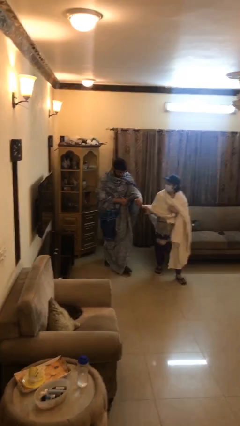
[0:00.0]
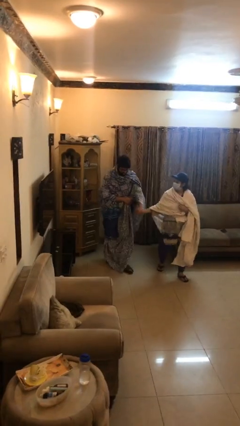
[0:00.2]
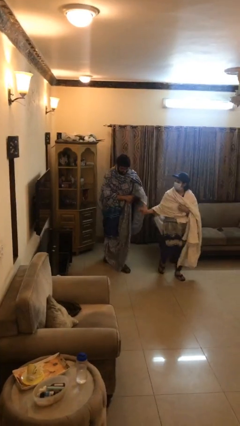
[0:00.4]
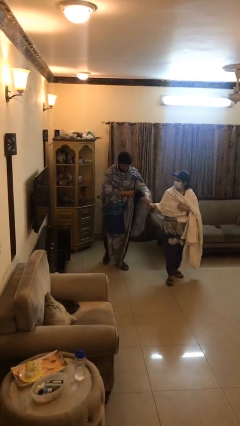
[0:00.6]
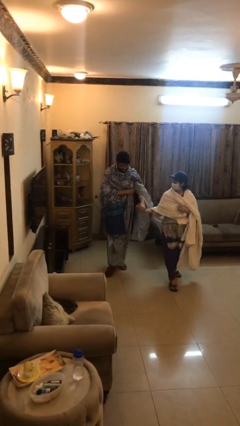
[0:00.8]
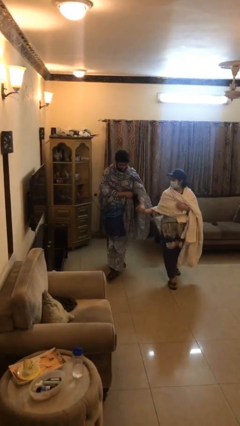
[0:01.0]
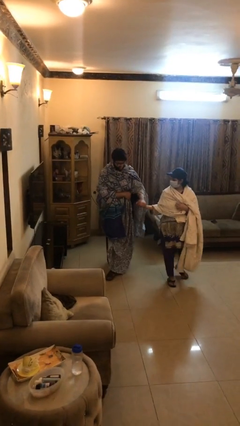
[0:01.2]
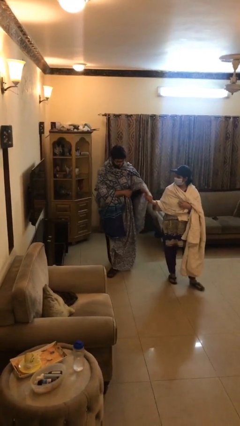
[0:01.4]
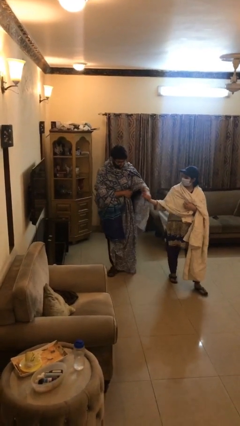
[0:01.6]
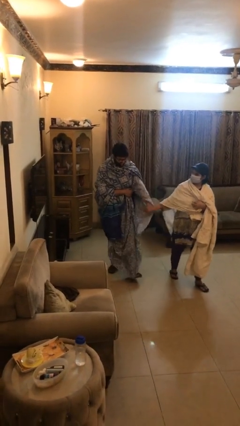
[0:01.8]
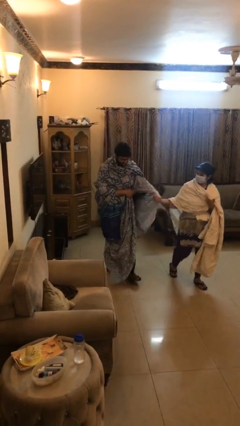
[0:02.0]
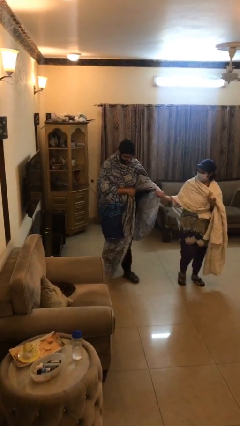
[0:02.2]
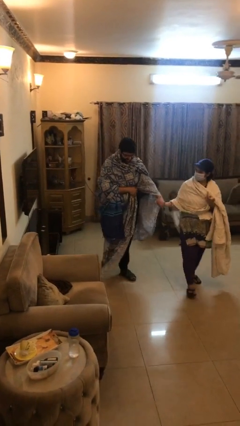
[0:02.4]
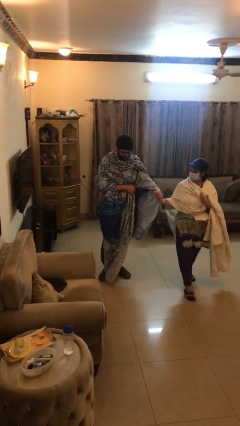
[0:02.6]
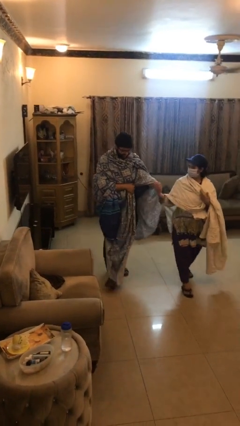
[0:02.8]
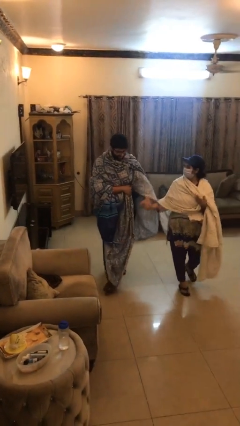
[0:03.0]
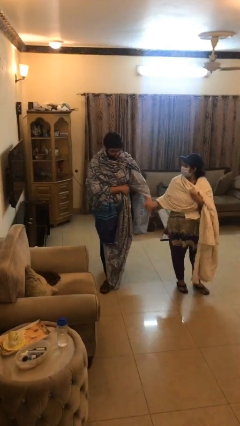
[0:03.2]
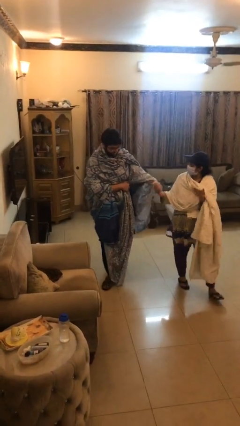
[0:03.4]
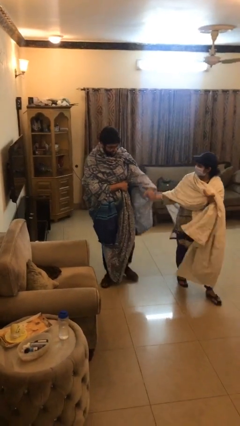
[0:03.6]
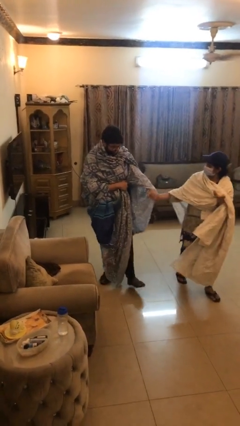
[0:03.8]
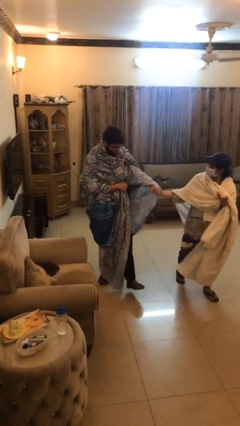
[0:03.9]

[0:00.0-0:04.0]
person holds hand

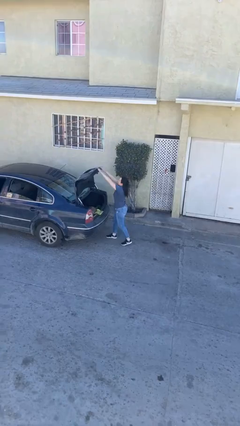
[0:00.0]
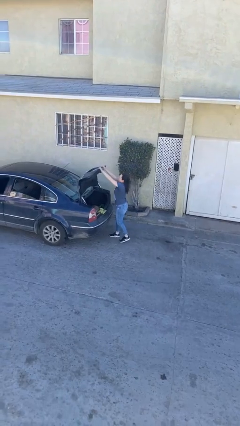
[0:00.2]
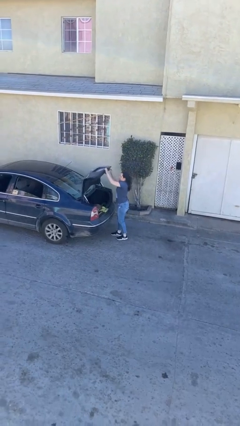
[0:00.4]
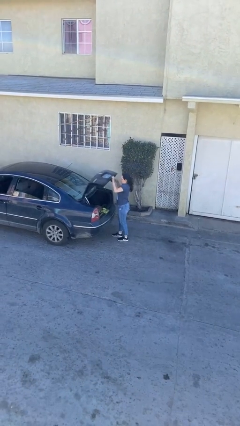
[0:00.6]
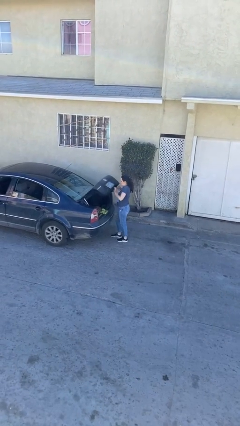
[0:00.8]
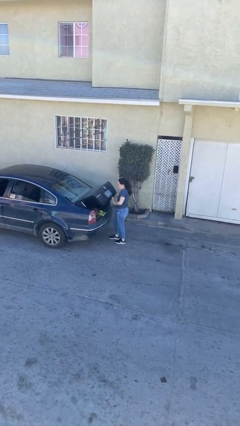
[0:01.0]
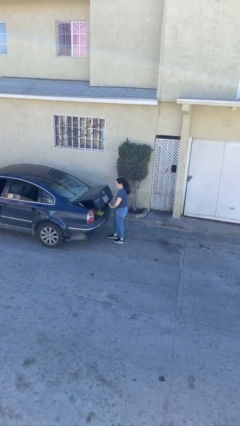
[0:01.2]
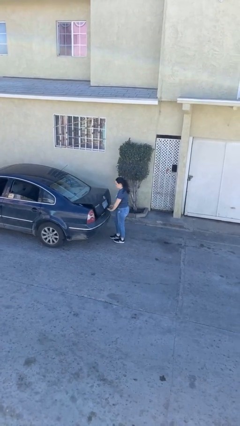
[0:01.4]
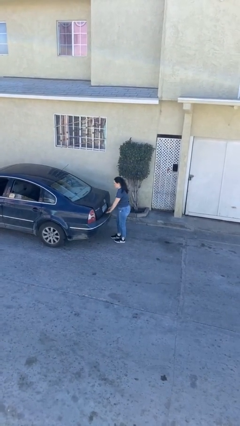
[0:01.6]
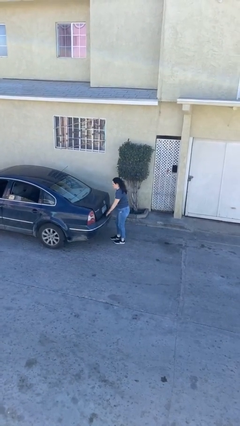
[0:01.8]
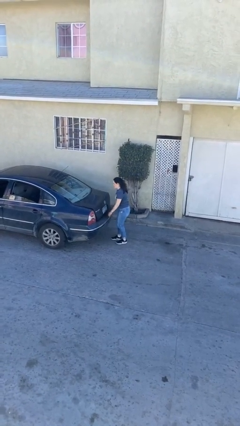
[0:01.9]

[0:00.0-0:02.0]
person closes car trunk

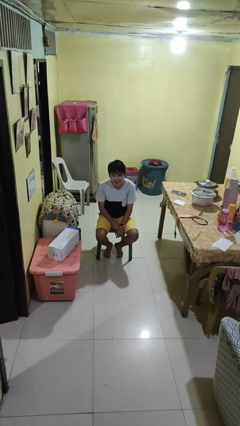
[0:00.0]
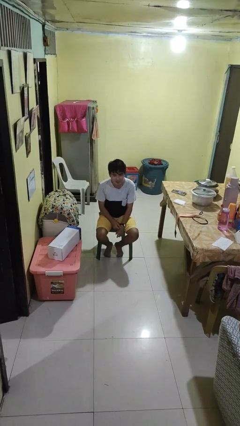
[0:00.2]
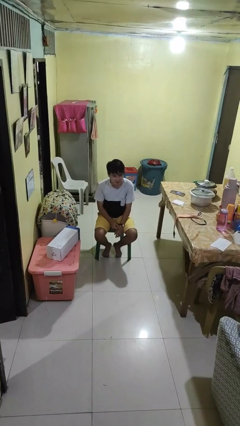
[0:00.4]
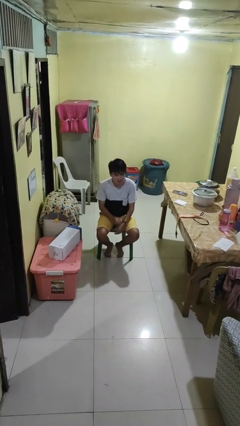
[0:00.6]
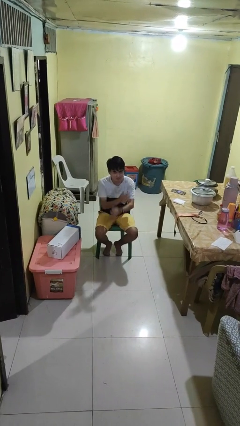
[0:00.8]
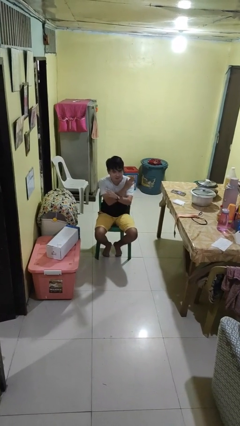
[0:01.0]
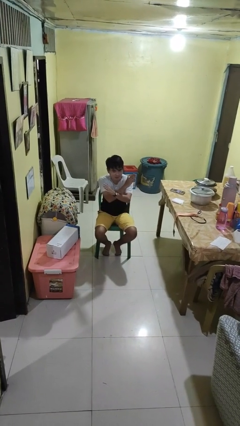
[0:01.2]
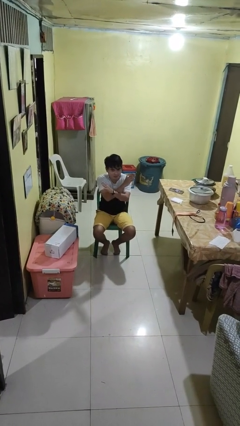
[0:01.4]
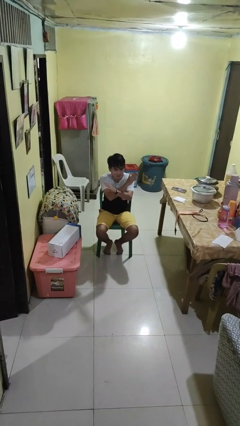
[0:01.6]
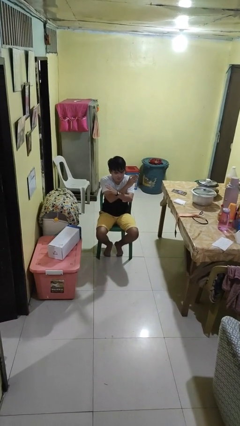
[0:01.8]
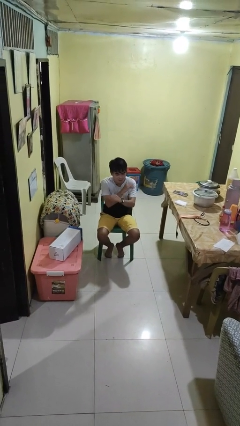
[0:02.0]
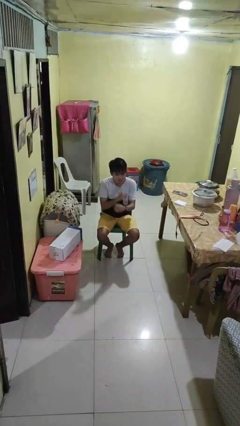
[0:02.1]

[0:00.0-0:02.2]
person gestures arms x

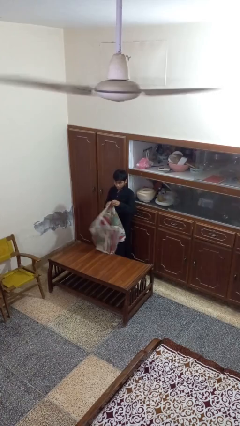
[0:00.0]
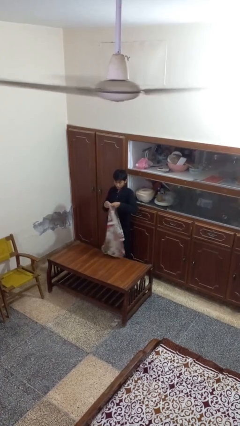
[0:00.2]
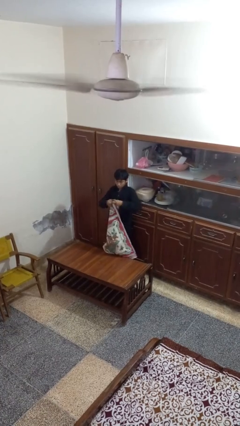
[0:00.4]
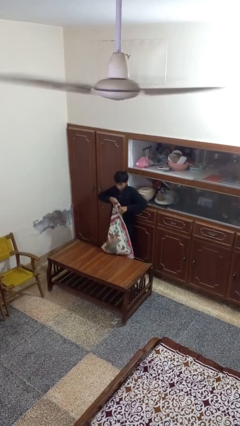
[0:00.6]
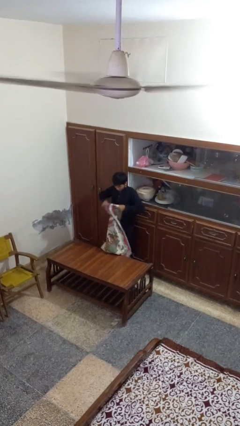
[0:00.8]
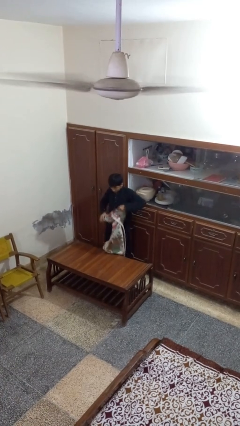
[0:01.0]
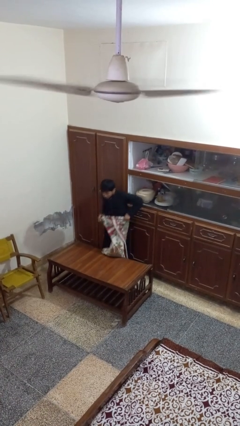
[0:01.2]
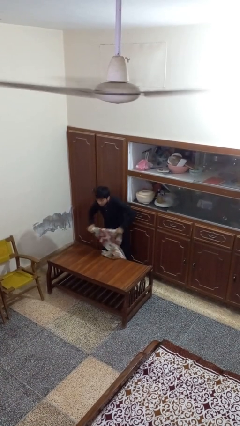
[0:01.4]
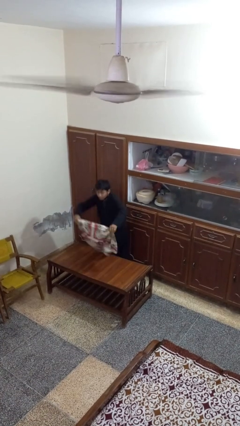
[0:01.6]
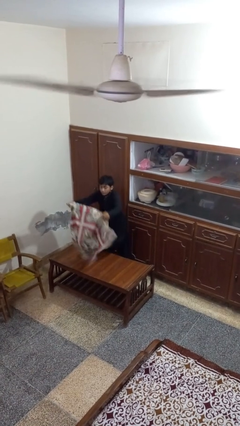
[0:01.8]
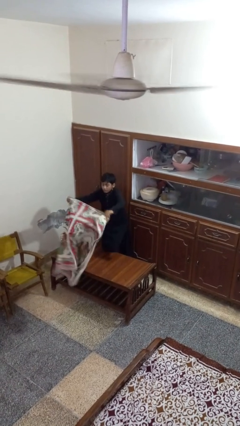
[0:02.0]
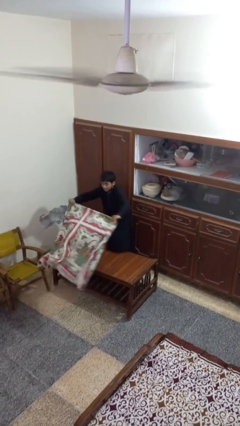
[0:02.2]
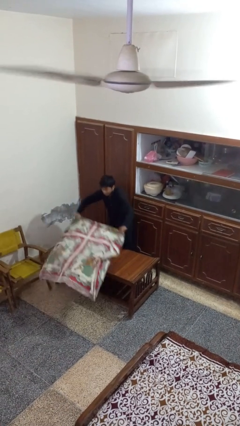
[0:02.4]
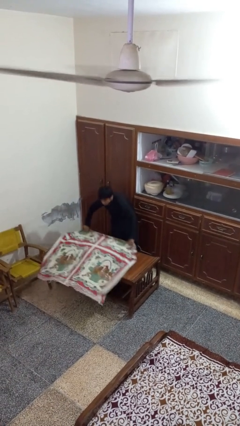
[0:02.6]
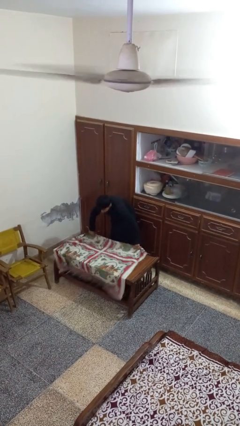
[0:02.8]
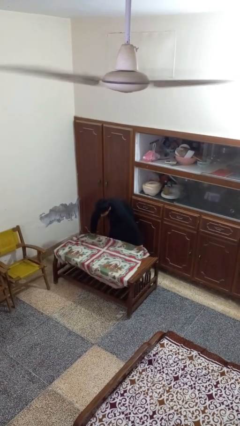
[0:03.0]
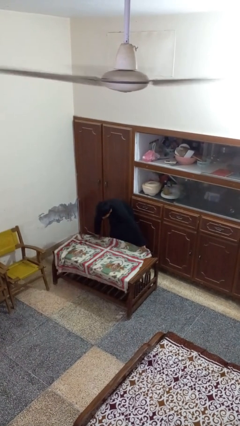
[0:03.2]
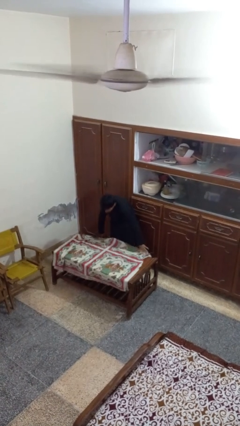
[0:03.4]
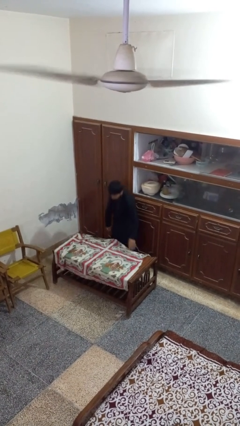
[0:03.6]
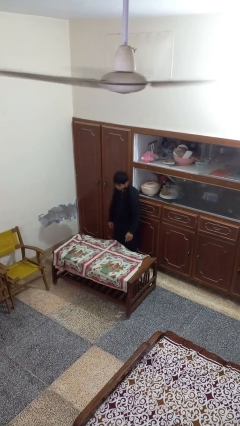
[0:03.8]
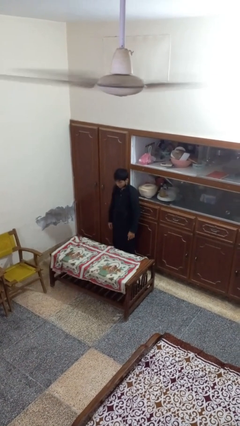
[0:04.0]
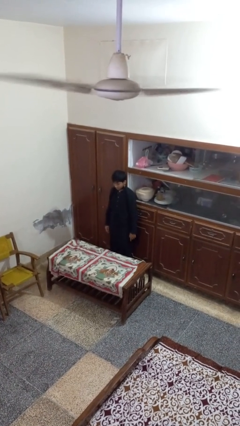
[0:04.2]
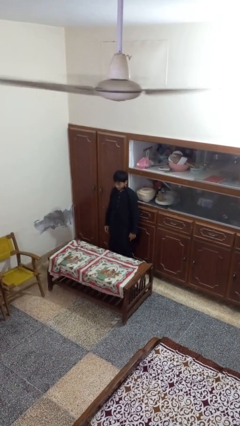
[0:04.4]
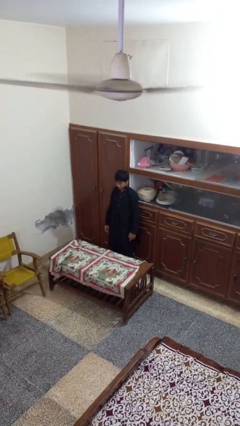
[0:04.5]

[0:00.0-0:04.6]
person spreads tablecloth

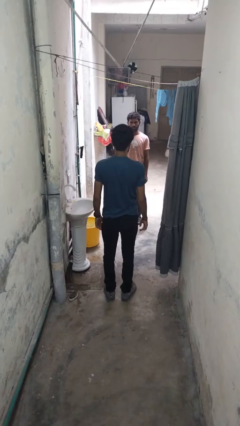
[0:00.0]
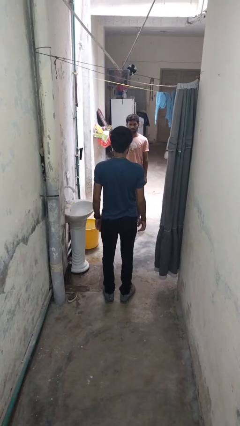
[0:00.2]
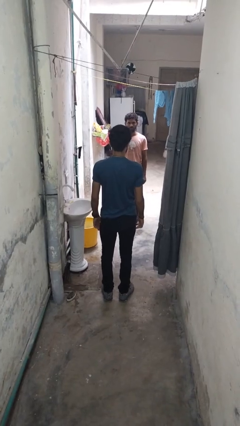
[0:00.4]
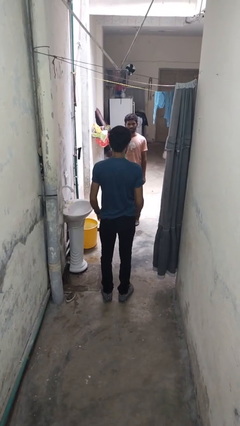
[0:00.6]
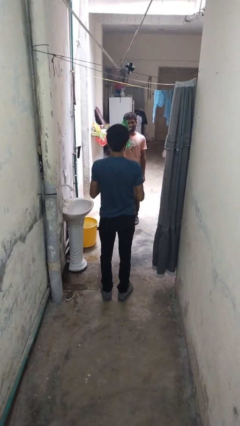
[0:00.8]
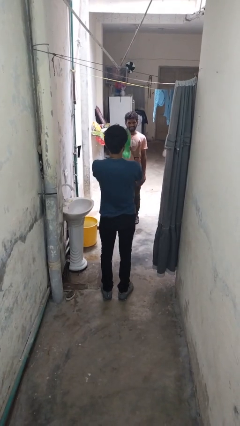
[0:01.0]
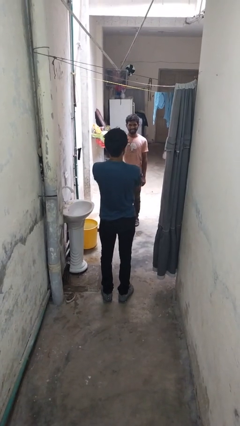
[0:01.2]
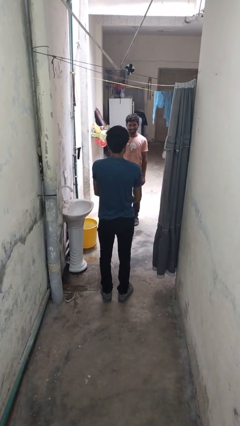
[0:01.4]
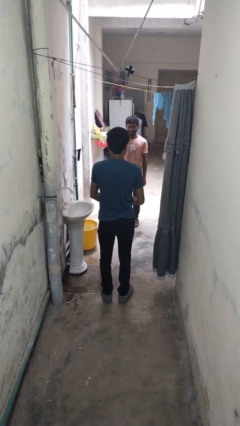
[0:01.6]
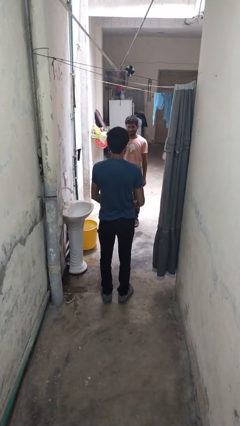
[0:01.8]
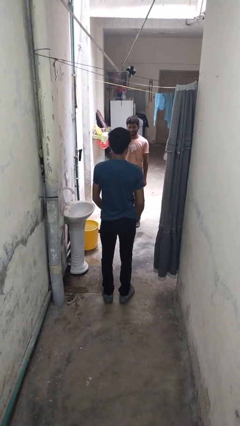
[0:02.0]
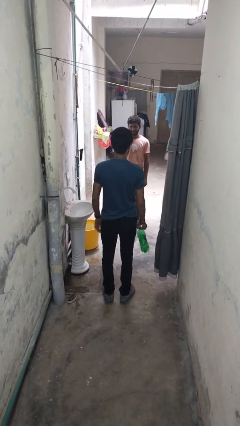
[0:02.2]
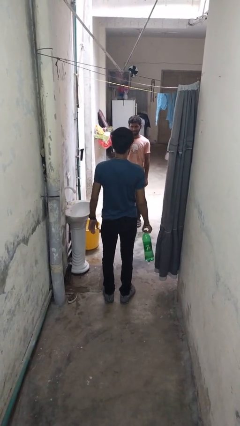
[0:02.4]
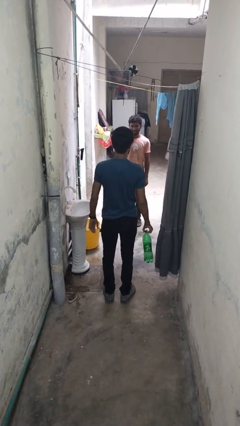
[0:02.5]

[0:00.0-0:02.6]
person catches object from person

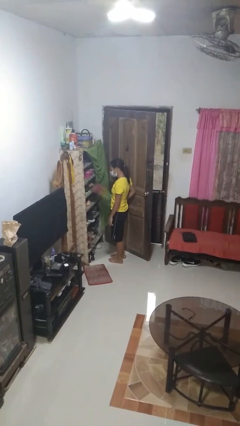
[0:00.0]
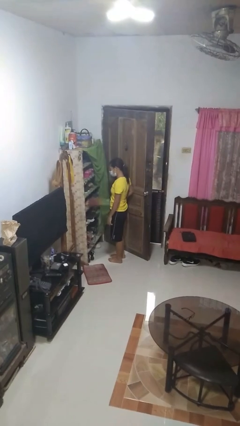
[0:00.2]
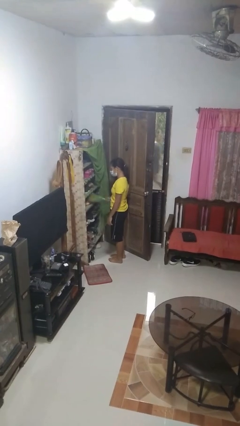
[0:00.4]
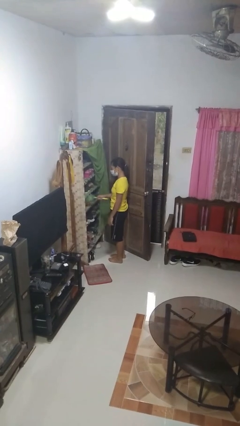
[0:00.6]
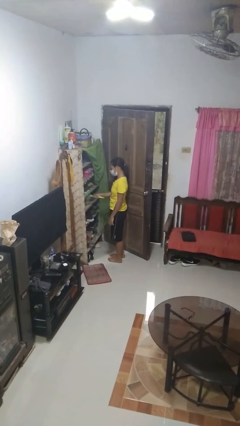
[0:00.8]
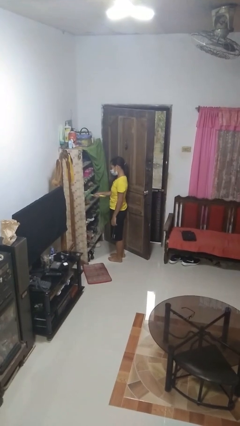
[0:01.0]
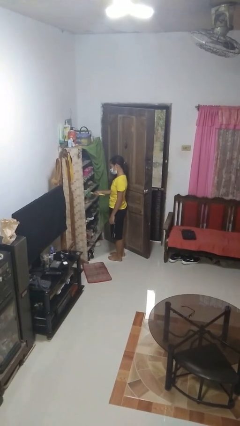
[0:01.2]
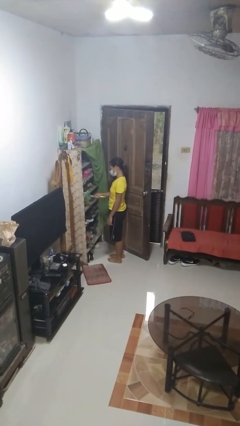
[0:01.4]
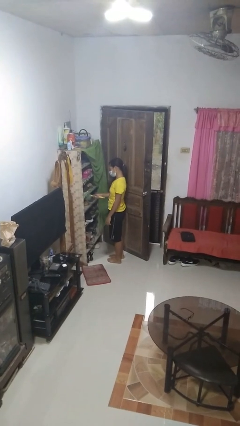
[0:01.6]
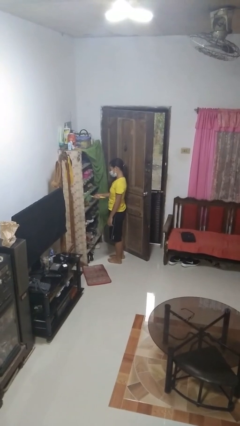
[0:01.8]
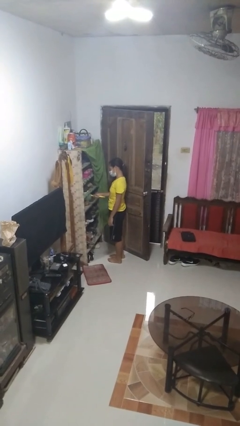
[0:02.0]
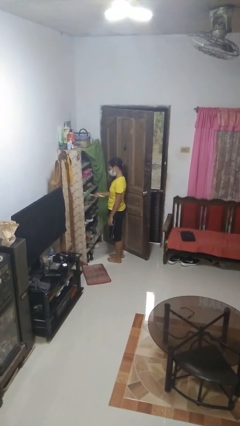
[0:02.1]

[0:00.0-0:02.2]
person dusts furniture
